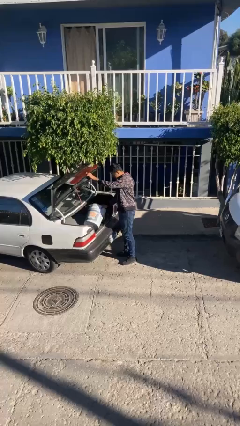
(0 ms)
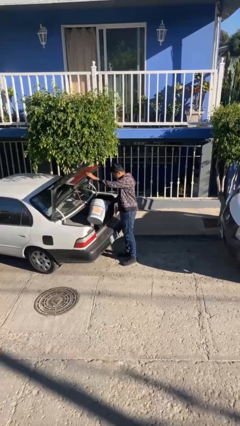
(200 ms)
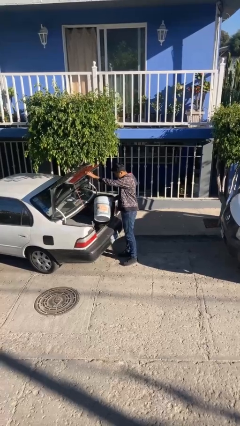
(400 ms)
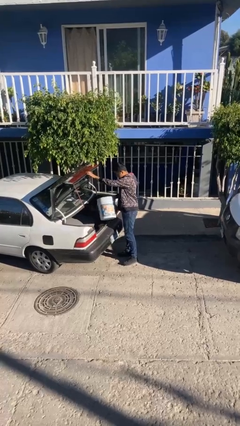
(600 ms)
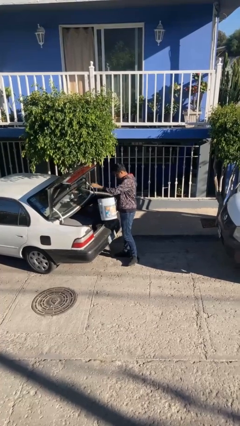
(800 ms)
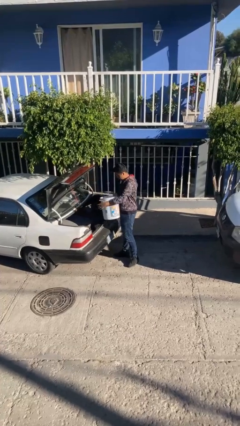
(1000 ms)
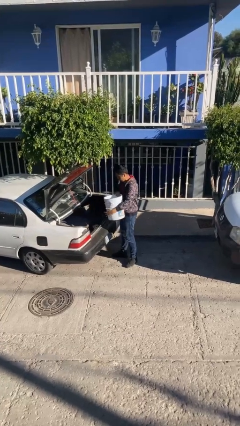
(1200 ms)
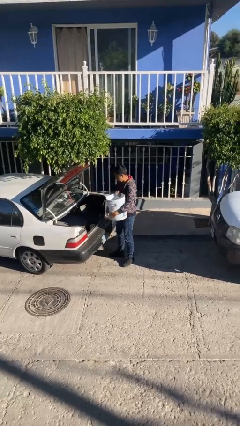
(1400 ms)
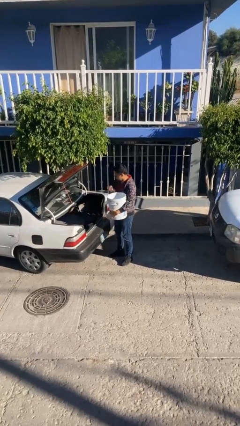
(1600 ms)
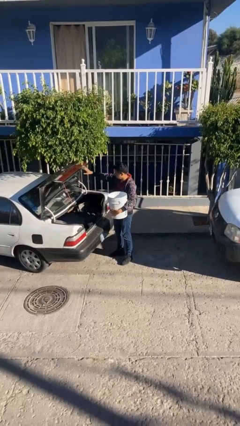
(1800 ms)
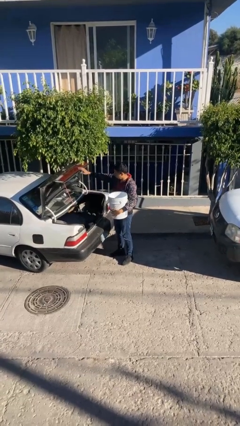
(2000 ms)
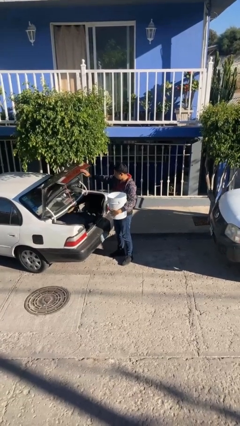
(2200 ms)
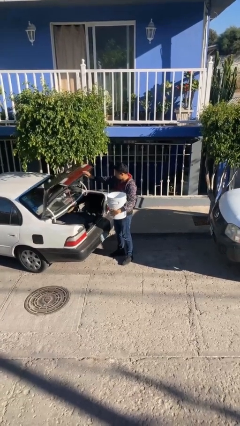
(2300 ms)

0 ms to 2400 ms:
person unloads car

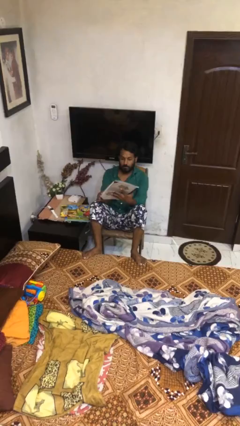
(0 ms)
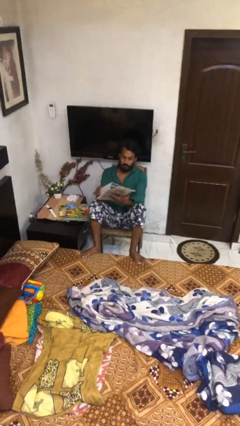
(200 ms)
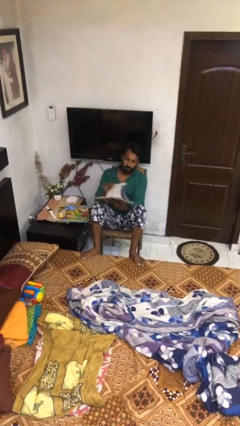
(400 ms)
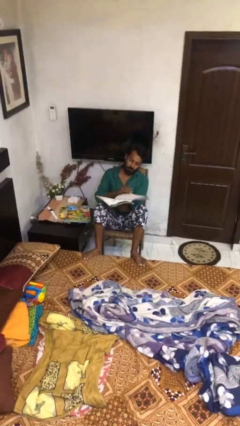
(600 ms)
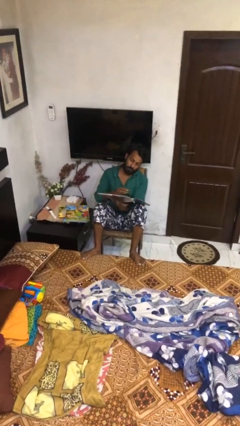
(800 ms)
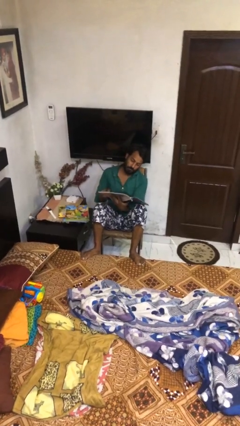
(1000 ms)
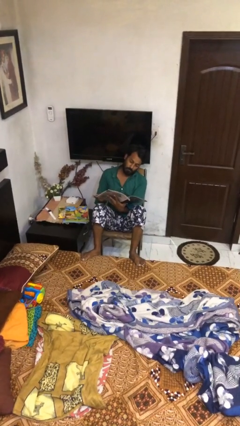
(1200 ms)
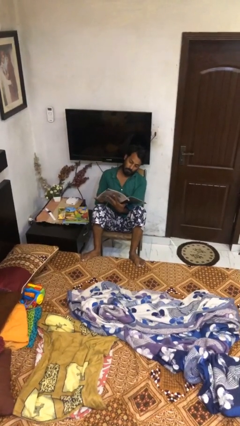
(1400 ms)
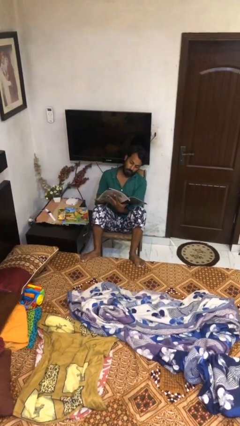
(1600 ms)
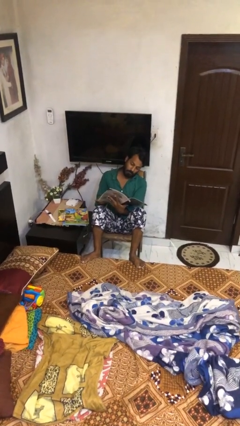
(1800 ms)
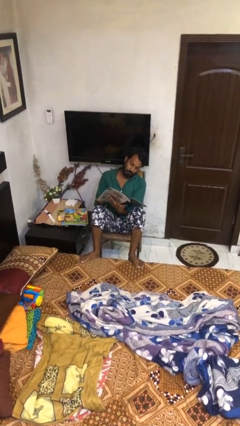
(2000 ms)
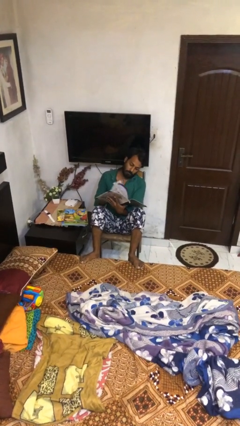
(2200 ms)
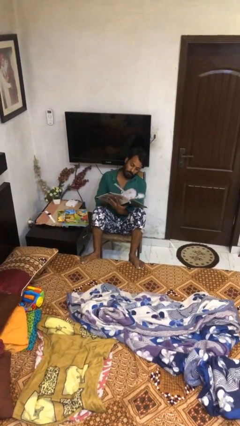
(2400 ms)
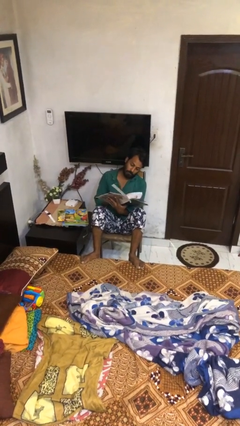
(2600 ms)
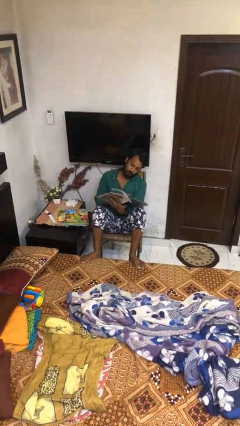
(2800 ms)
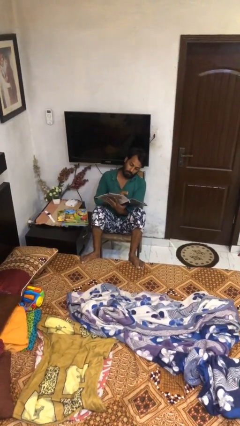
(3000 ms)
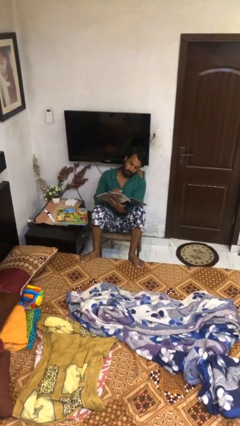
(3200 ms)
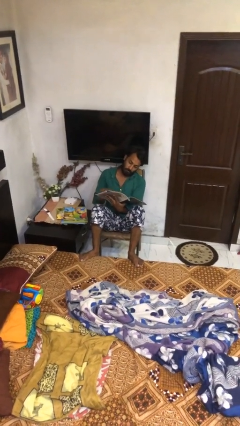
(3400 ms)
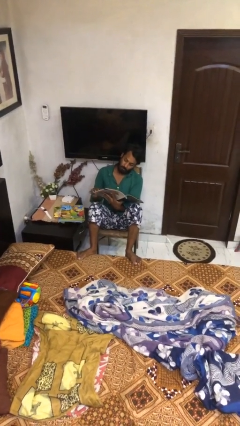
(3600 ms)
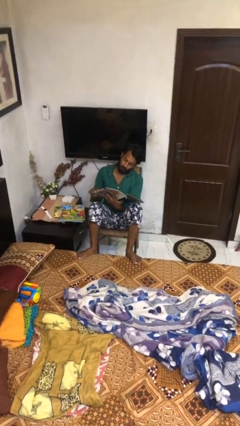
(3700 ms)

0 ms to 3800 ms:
person reads document

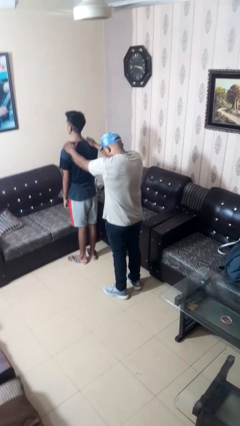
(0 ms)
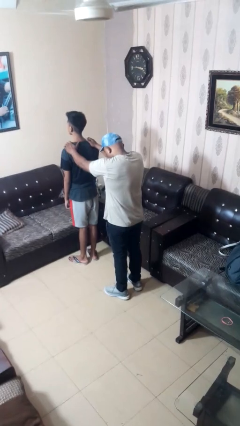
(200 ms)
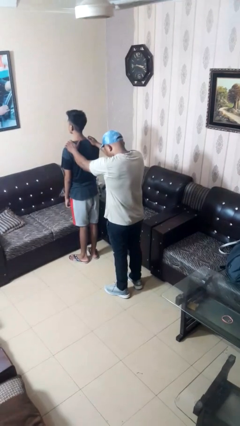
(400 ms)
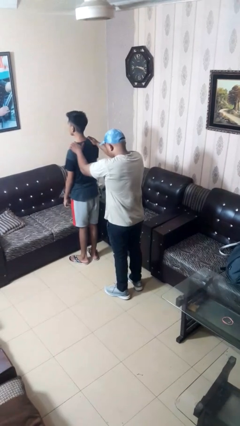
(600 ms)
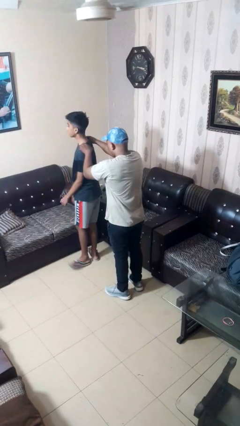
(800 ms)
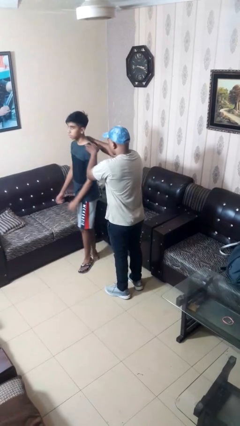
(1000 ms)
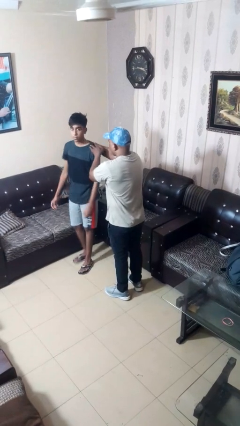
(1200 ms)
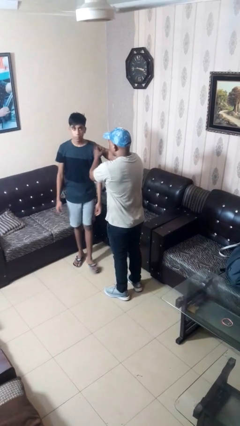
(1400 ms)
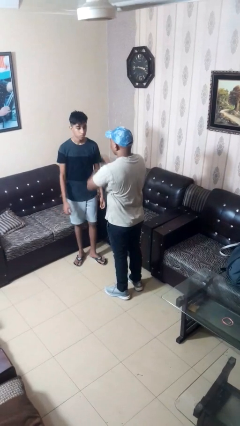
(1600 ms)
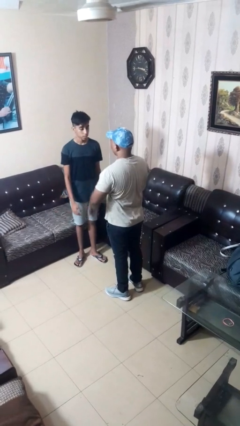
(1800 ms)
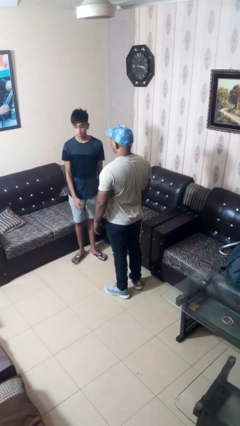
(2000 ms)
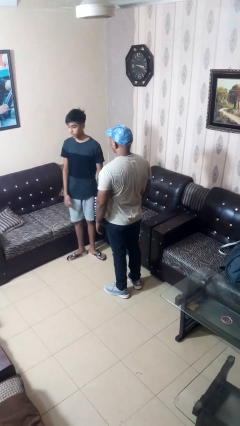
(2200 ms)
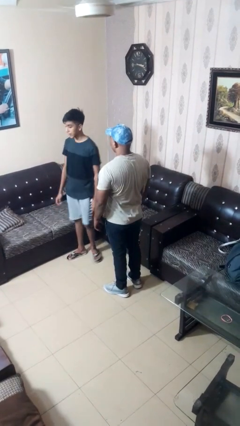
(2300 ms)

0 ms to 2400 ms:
person spins person around

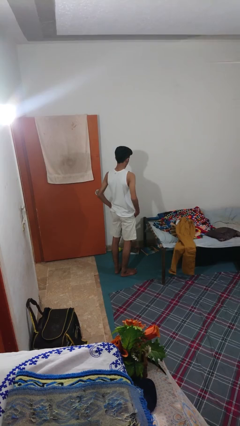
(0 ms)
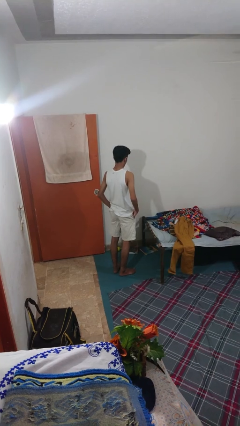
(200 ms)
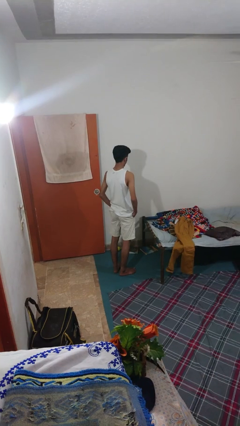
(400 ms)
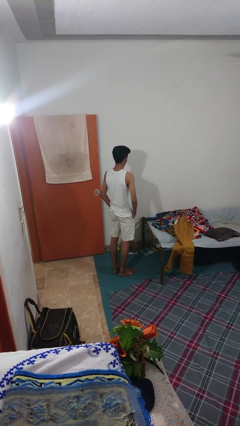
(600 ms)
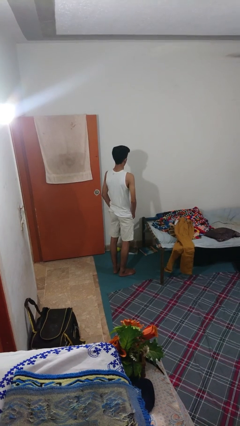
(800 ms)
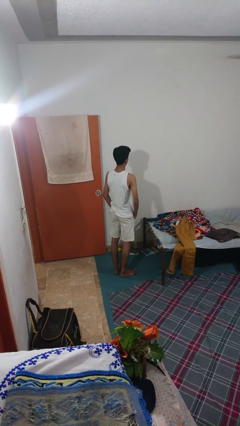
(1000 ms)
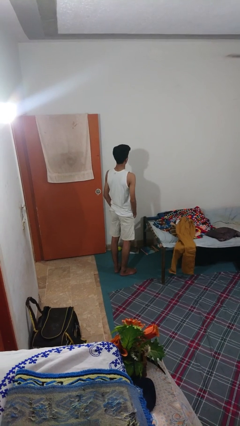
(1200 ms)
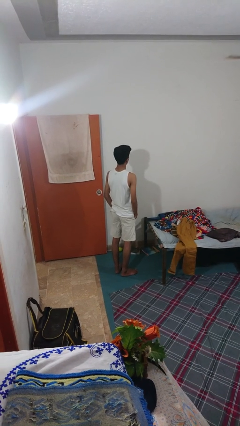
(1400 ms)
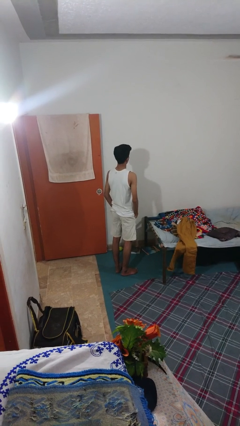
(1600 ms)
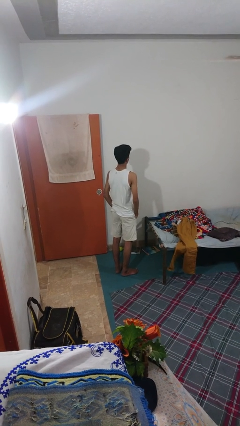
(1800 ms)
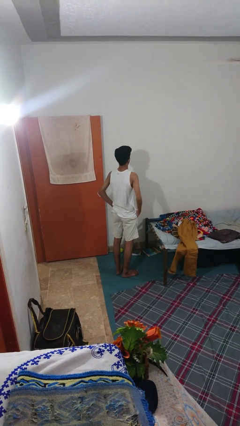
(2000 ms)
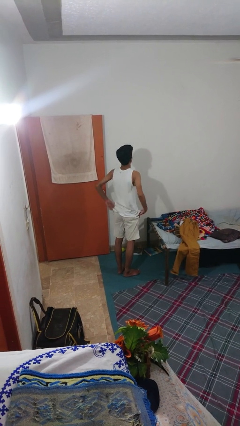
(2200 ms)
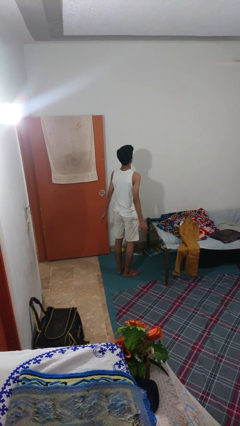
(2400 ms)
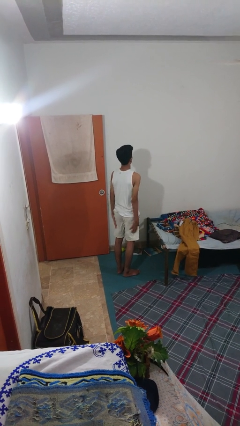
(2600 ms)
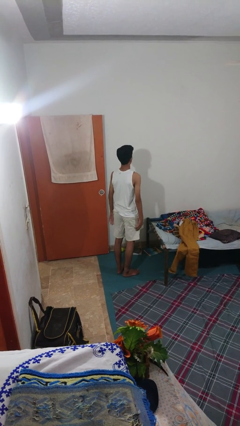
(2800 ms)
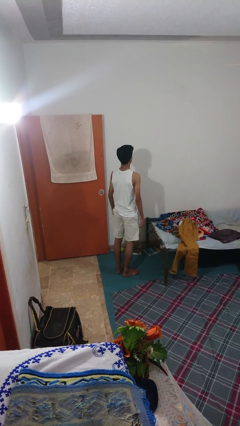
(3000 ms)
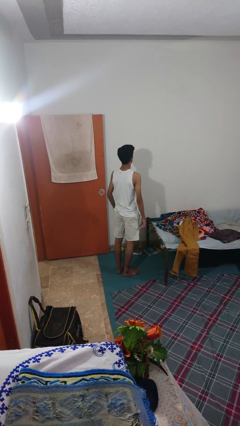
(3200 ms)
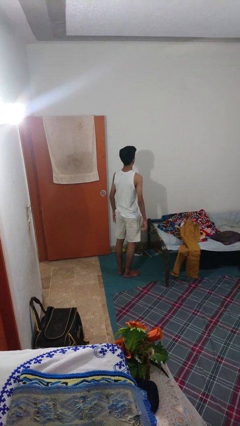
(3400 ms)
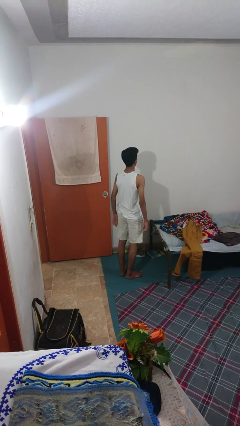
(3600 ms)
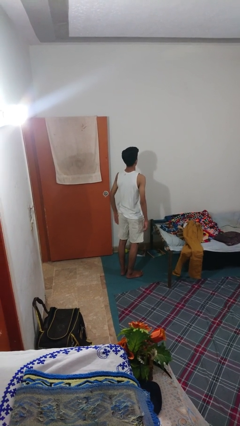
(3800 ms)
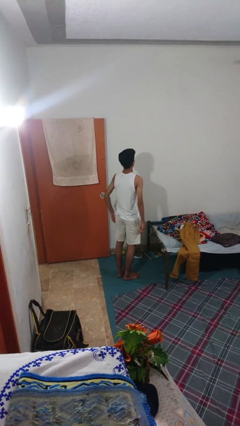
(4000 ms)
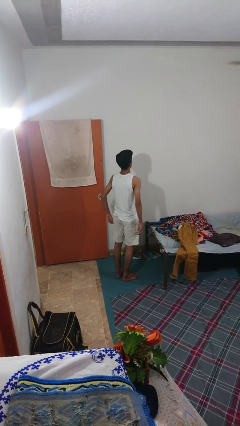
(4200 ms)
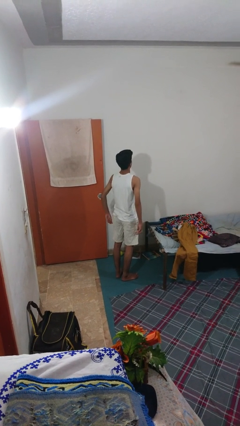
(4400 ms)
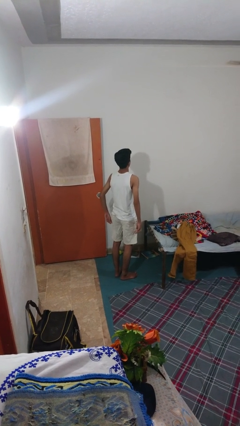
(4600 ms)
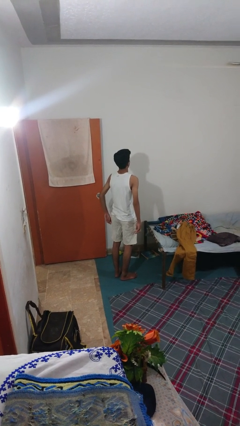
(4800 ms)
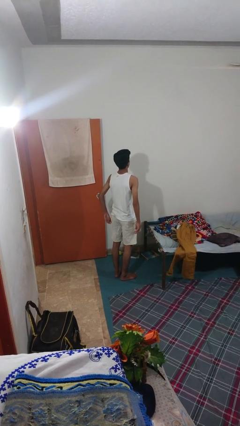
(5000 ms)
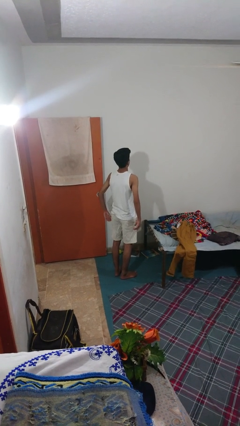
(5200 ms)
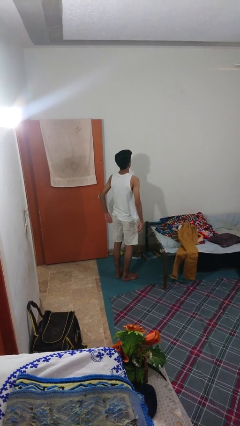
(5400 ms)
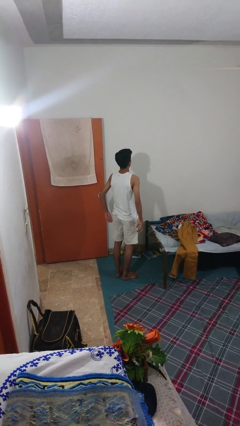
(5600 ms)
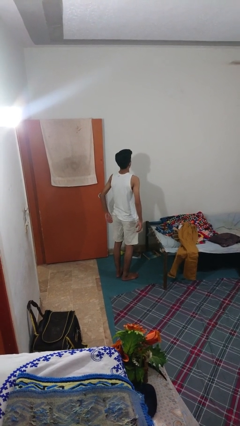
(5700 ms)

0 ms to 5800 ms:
person puts hands in back pockets

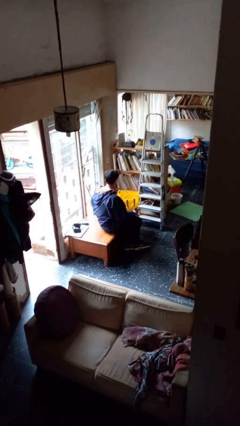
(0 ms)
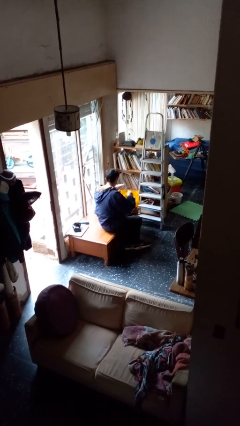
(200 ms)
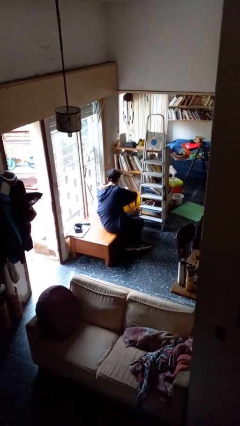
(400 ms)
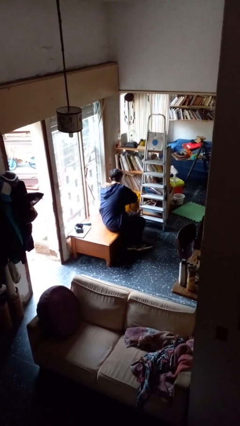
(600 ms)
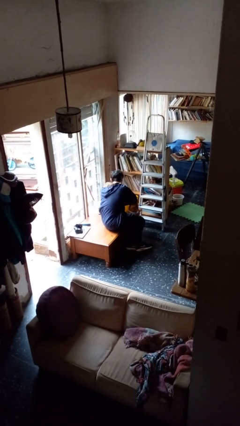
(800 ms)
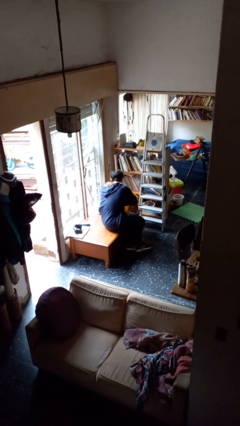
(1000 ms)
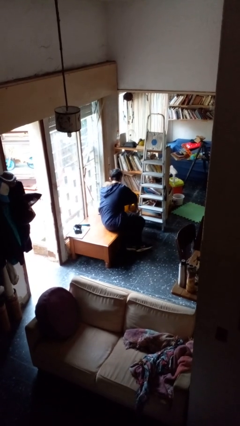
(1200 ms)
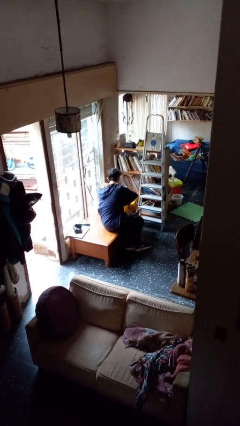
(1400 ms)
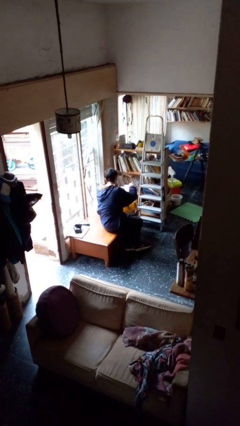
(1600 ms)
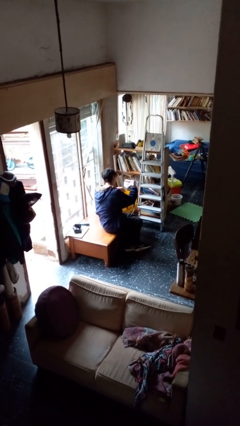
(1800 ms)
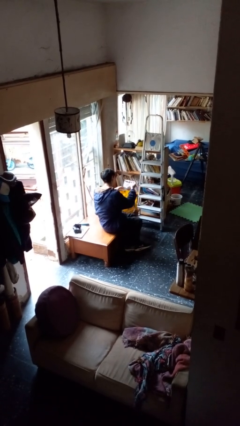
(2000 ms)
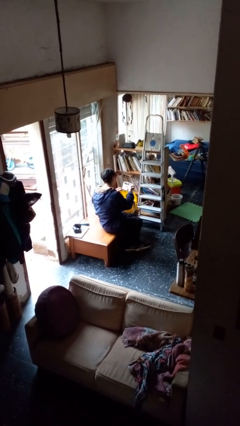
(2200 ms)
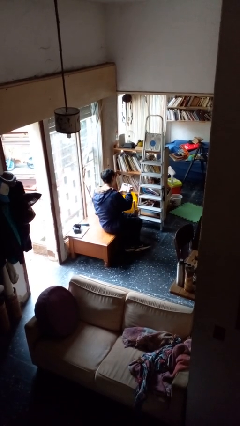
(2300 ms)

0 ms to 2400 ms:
person takes object from bag

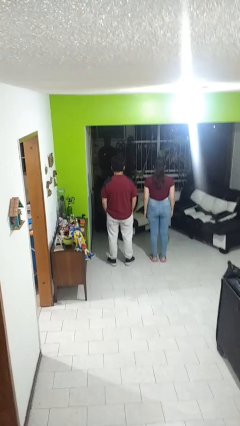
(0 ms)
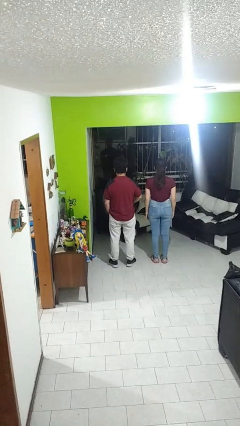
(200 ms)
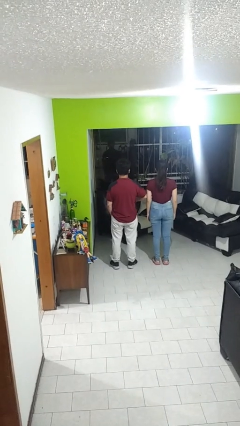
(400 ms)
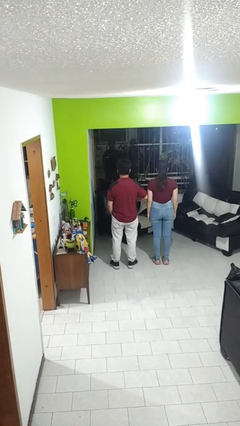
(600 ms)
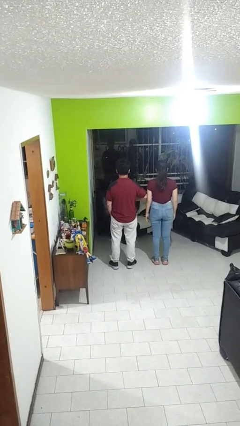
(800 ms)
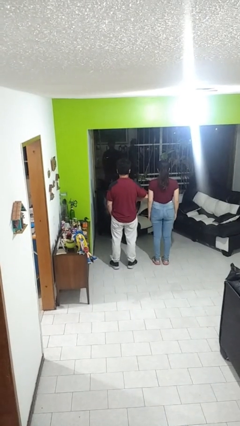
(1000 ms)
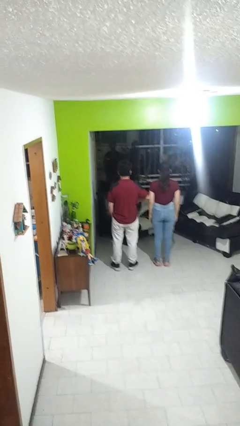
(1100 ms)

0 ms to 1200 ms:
person nudges person with elbow
